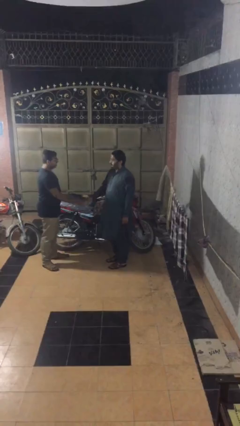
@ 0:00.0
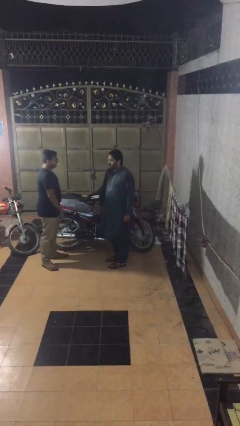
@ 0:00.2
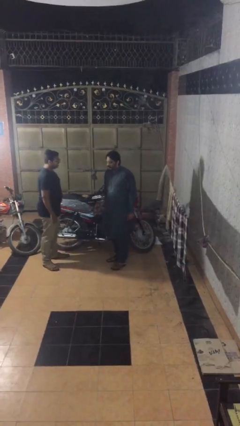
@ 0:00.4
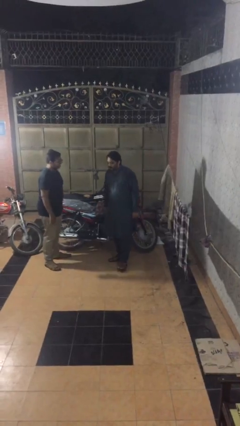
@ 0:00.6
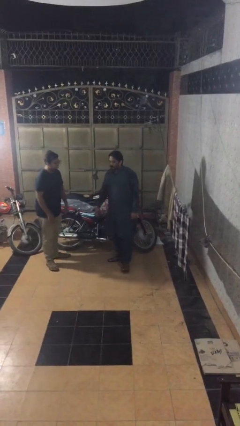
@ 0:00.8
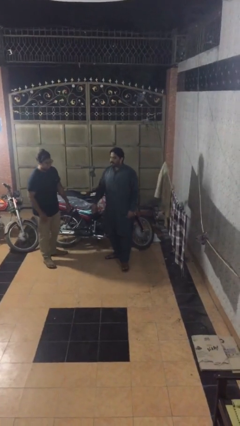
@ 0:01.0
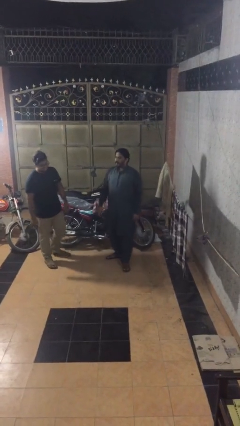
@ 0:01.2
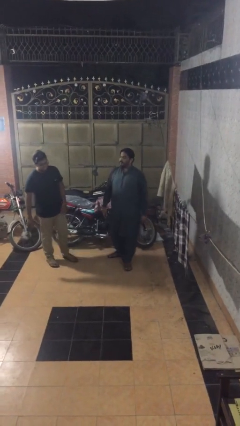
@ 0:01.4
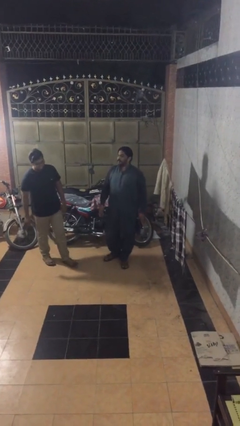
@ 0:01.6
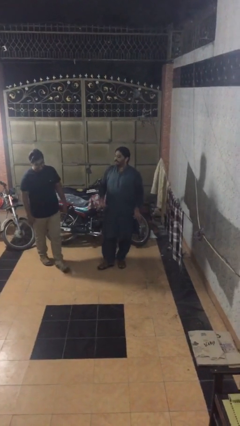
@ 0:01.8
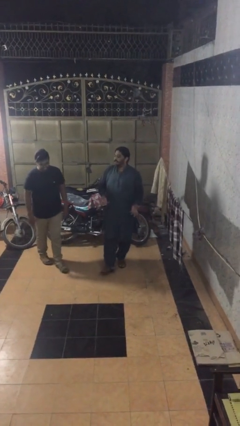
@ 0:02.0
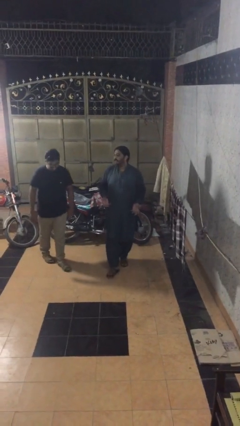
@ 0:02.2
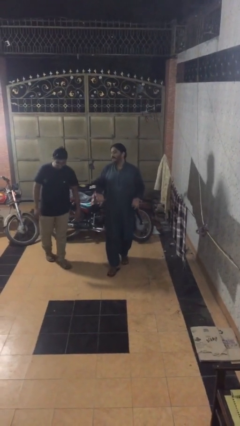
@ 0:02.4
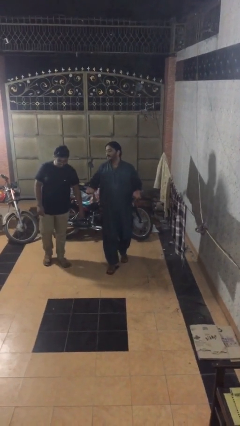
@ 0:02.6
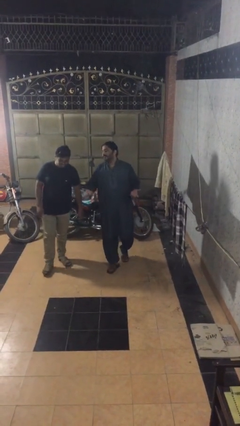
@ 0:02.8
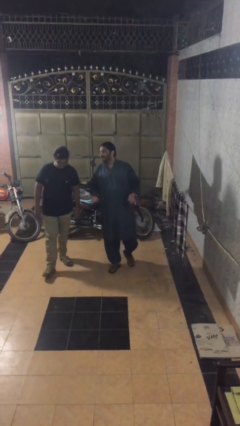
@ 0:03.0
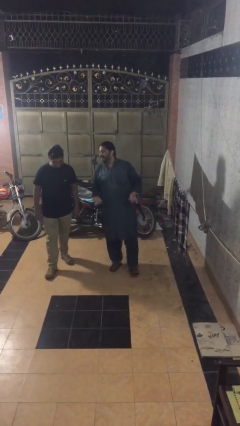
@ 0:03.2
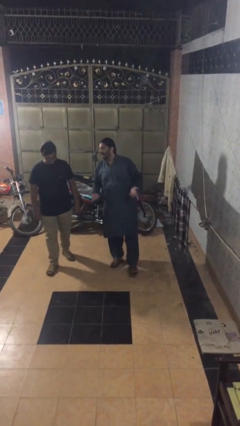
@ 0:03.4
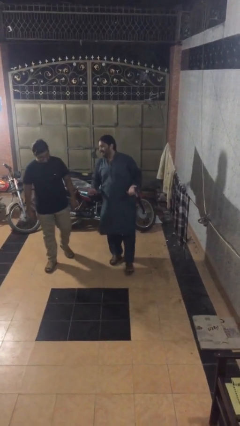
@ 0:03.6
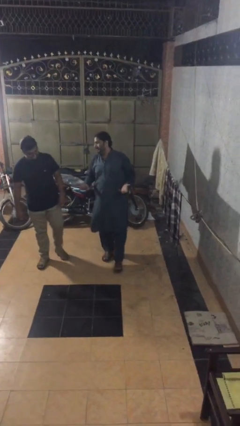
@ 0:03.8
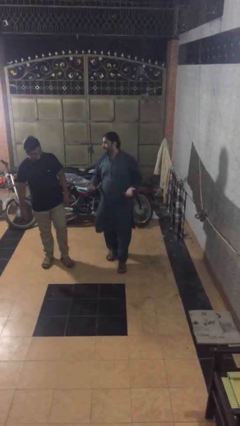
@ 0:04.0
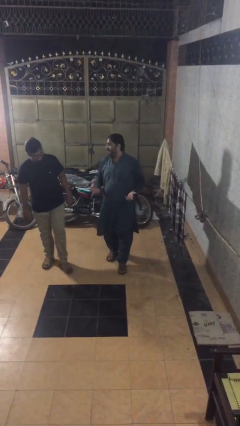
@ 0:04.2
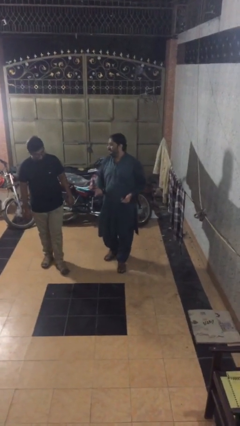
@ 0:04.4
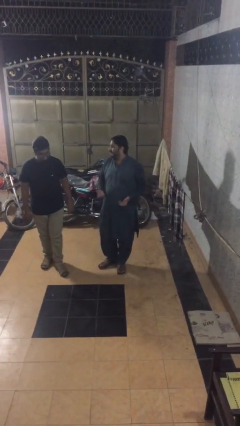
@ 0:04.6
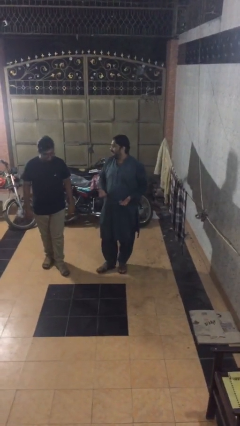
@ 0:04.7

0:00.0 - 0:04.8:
person talks to person

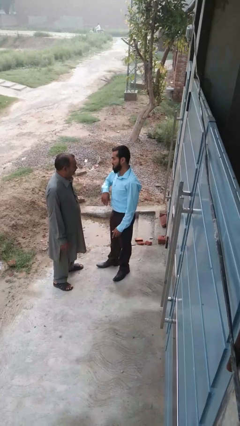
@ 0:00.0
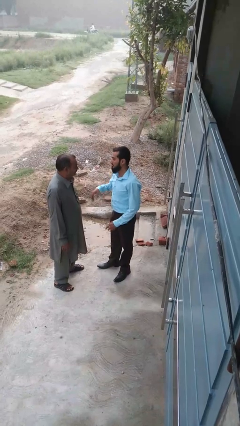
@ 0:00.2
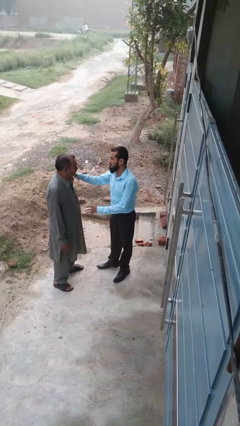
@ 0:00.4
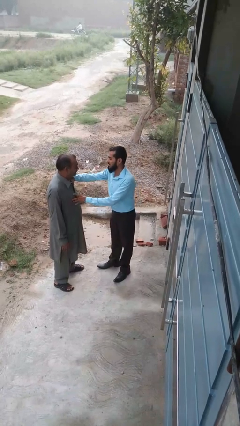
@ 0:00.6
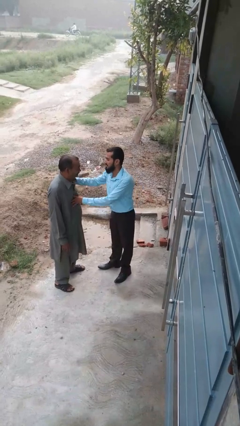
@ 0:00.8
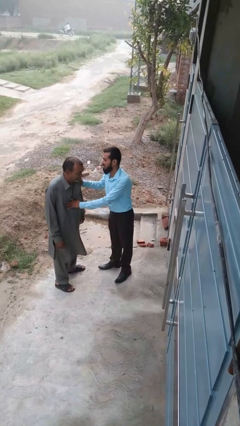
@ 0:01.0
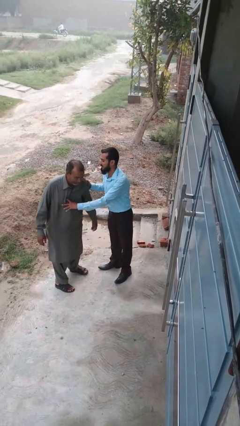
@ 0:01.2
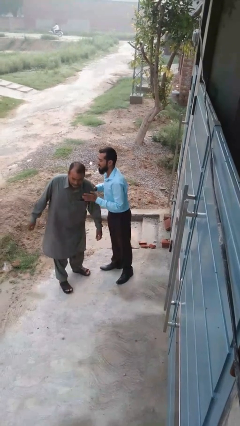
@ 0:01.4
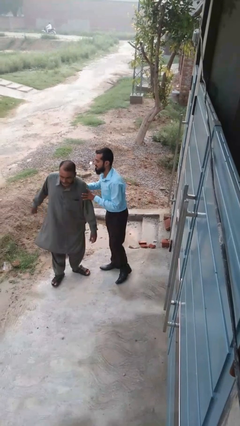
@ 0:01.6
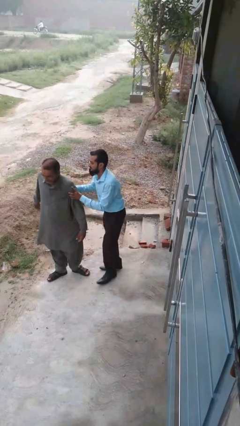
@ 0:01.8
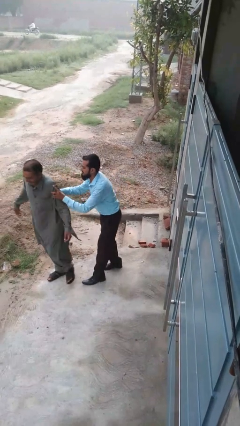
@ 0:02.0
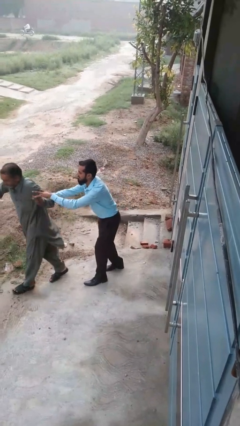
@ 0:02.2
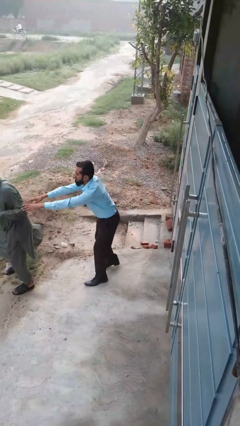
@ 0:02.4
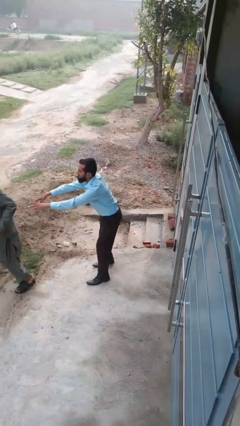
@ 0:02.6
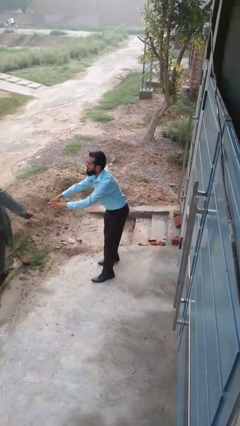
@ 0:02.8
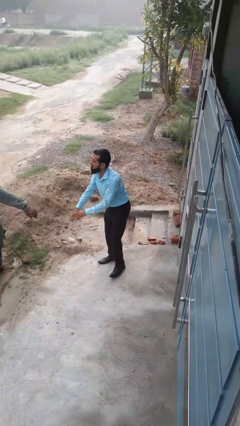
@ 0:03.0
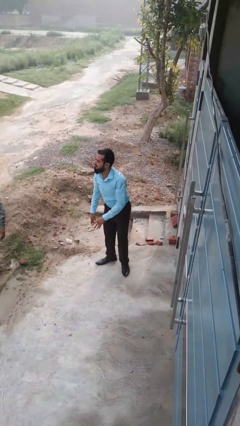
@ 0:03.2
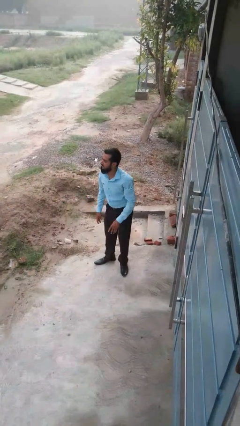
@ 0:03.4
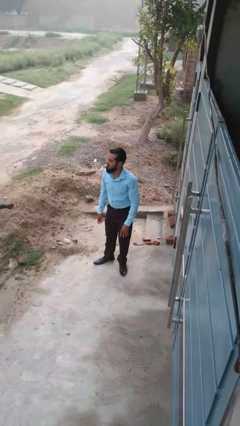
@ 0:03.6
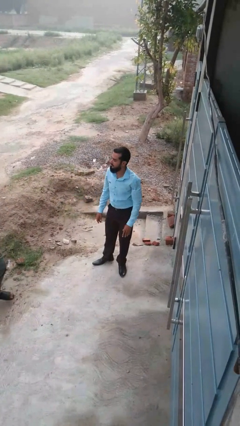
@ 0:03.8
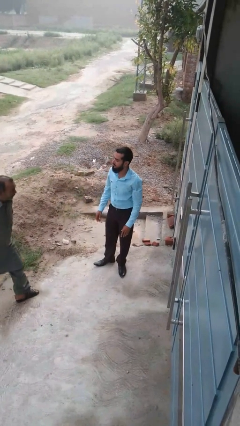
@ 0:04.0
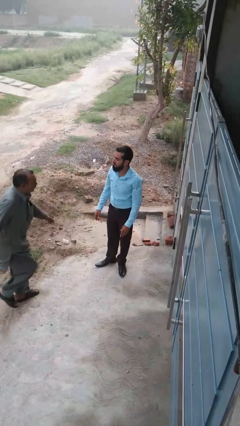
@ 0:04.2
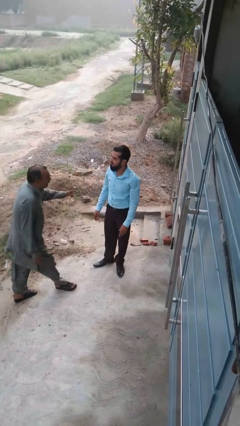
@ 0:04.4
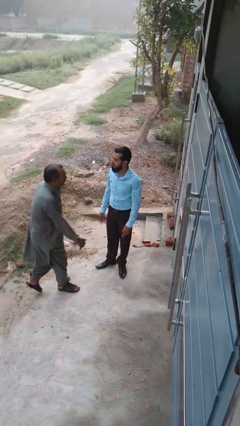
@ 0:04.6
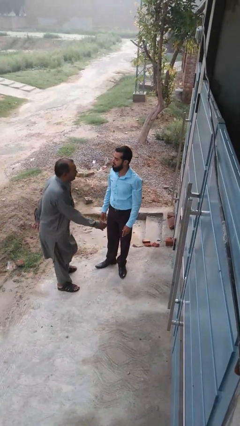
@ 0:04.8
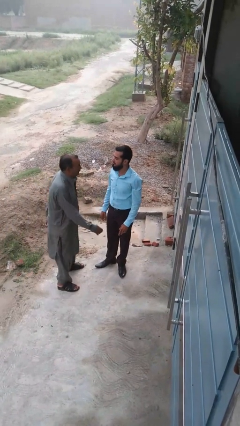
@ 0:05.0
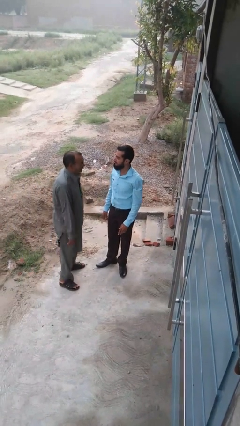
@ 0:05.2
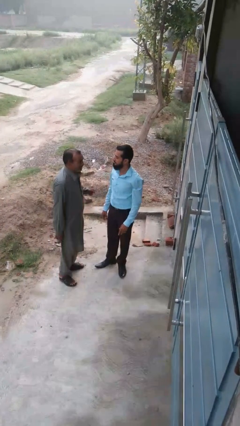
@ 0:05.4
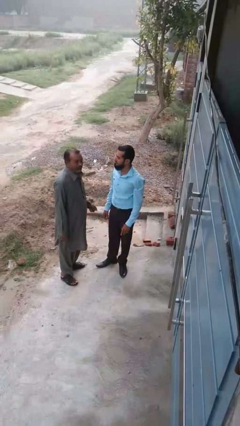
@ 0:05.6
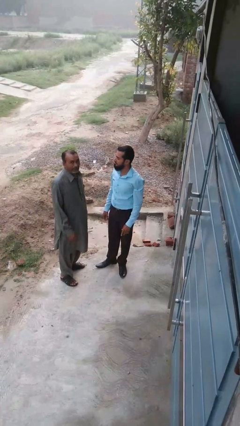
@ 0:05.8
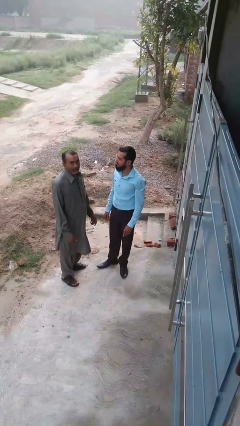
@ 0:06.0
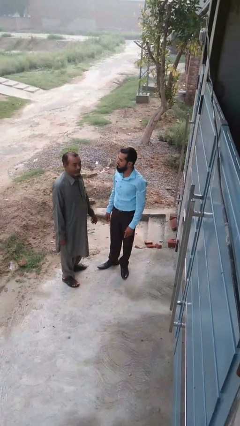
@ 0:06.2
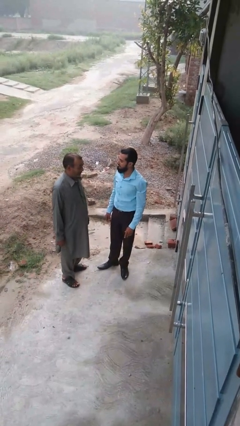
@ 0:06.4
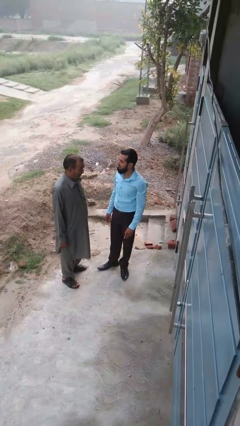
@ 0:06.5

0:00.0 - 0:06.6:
person shoves person

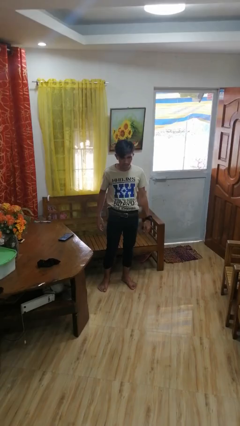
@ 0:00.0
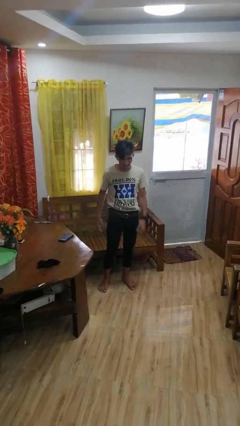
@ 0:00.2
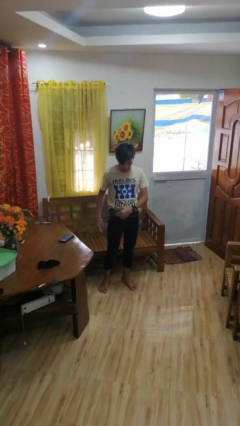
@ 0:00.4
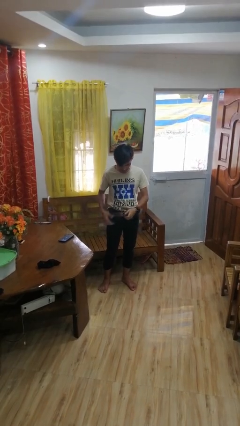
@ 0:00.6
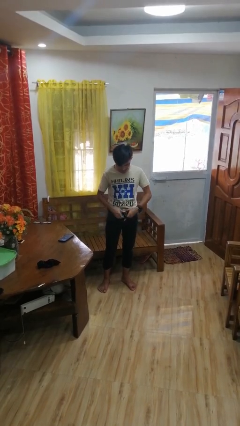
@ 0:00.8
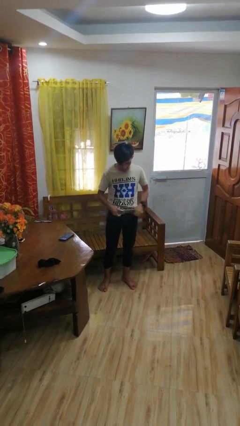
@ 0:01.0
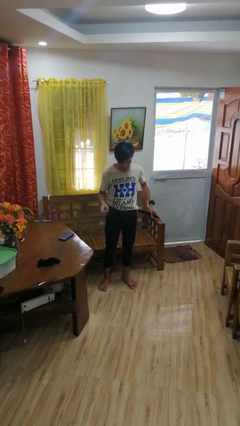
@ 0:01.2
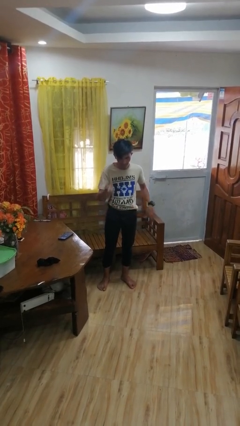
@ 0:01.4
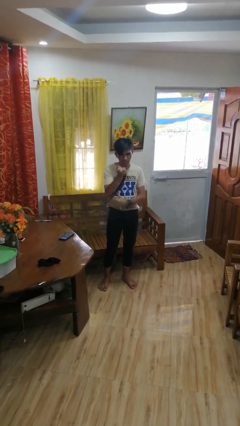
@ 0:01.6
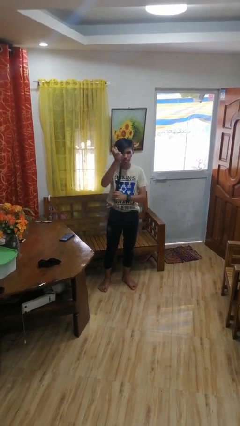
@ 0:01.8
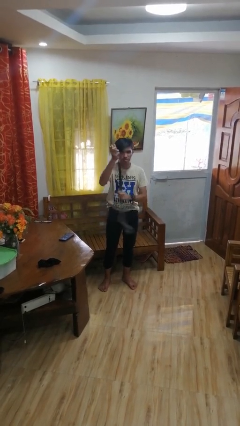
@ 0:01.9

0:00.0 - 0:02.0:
person takes off belt

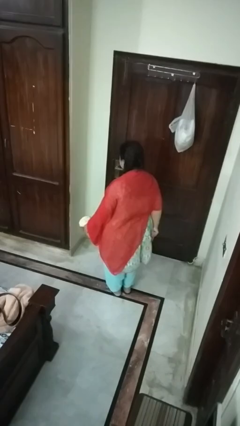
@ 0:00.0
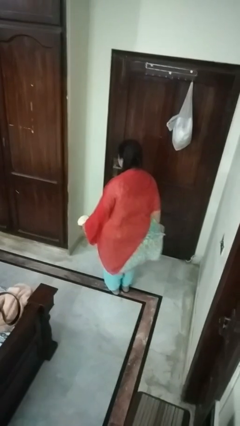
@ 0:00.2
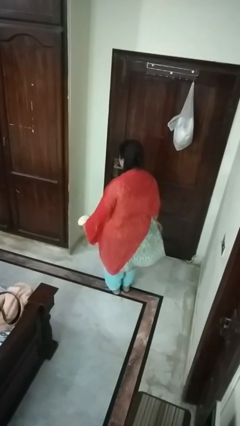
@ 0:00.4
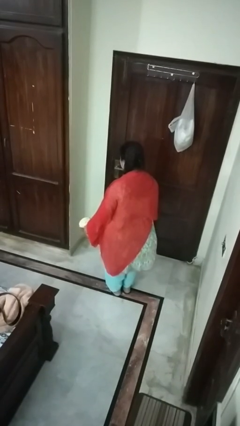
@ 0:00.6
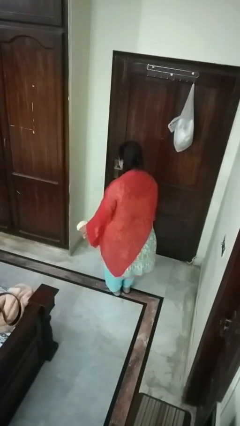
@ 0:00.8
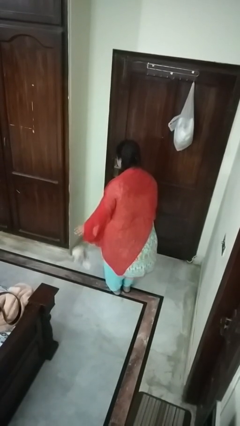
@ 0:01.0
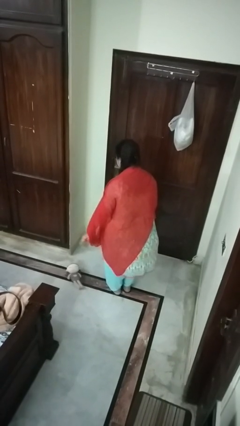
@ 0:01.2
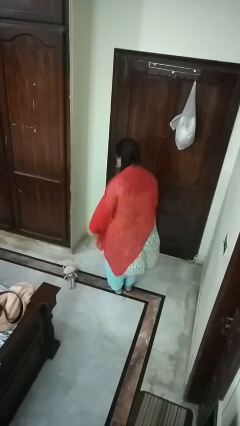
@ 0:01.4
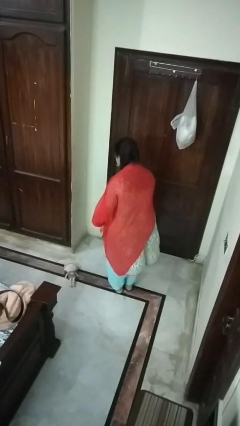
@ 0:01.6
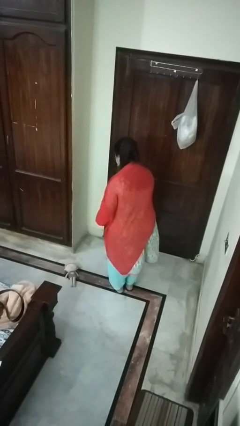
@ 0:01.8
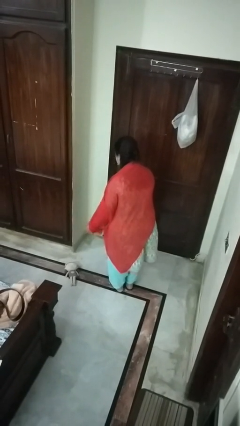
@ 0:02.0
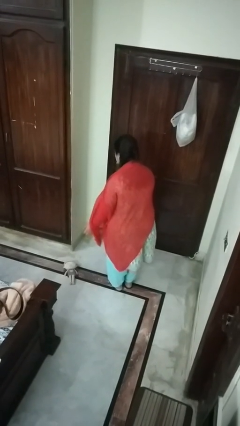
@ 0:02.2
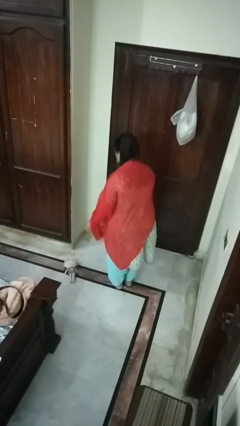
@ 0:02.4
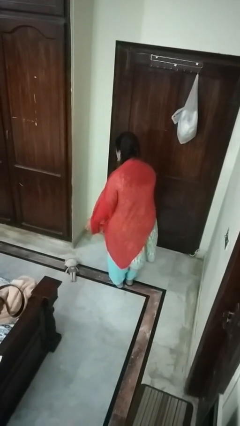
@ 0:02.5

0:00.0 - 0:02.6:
person drops object

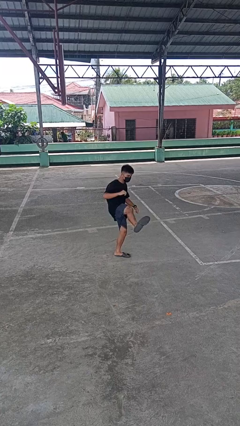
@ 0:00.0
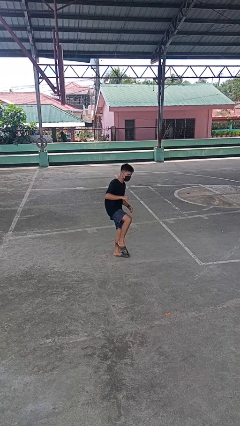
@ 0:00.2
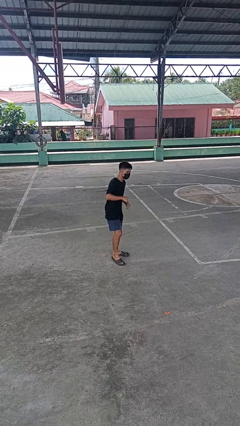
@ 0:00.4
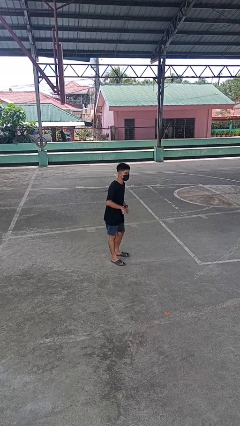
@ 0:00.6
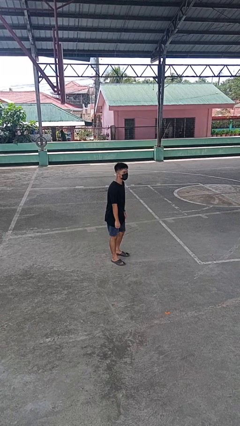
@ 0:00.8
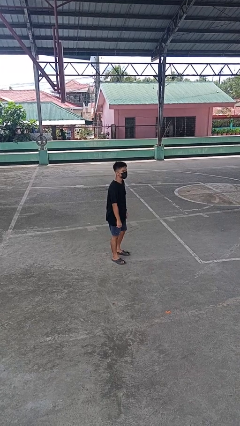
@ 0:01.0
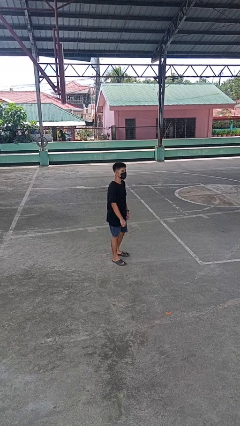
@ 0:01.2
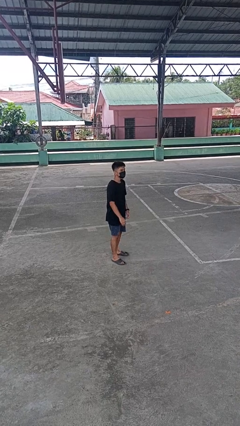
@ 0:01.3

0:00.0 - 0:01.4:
person karate kicks
